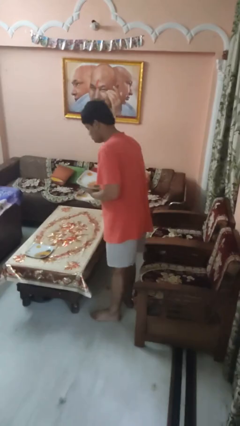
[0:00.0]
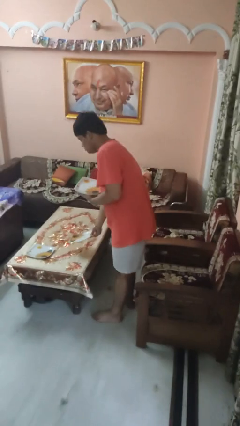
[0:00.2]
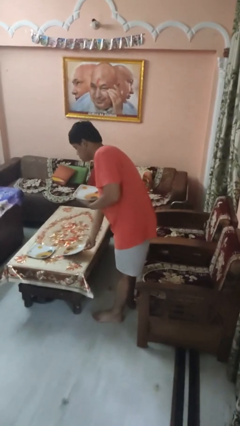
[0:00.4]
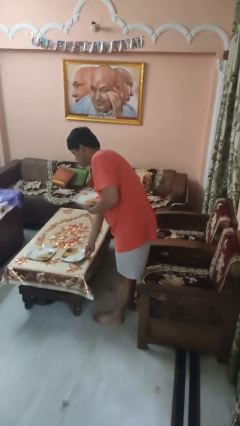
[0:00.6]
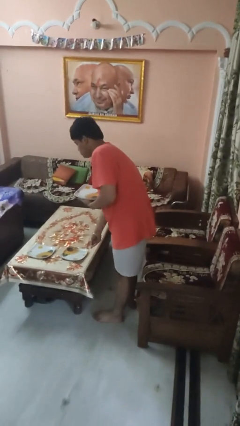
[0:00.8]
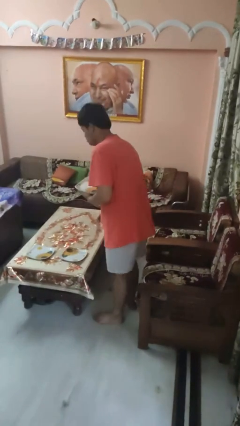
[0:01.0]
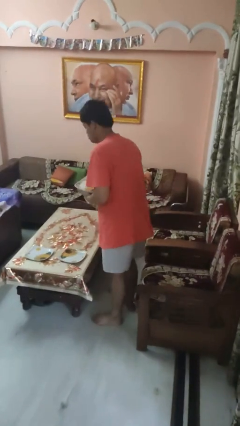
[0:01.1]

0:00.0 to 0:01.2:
person sets table

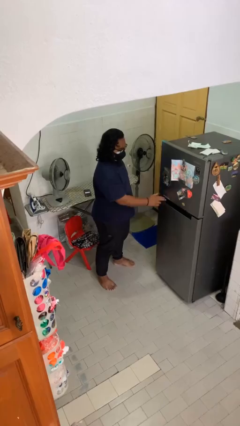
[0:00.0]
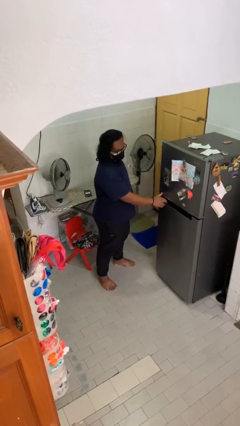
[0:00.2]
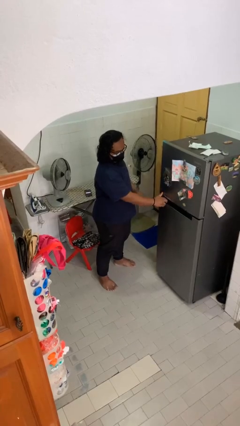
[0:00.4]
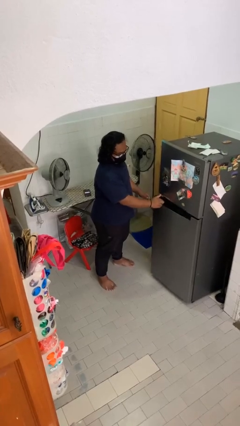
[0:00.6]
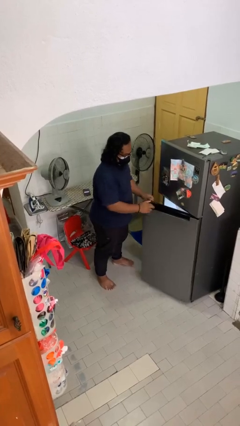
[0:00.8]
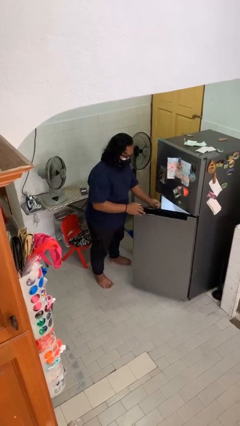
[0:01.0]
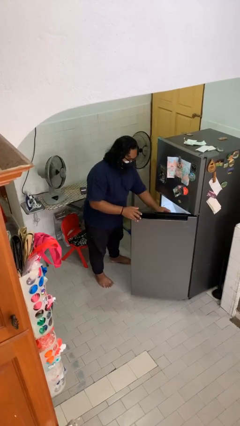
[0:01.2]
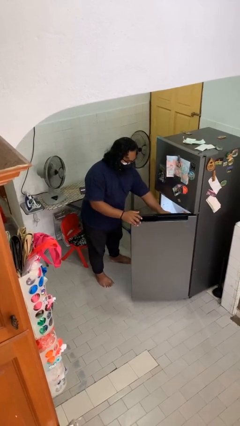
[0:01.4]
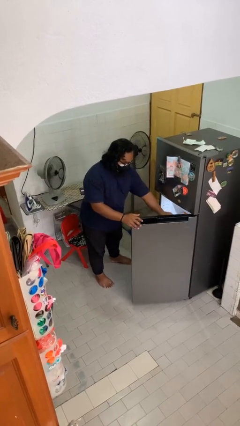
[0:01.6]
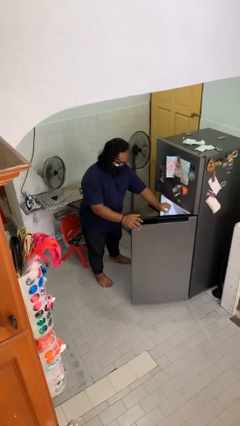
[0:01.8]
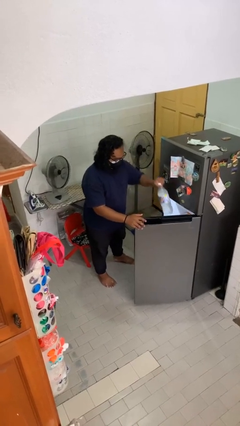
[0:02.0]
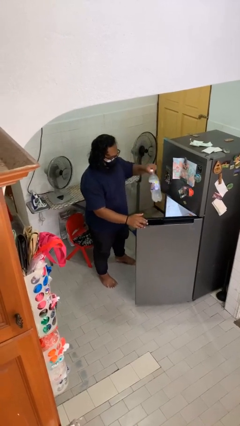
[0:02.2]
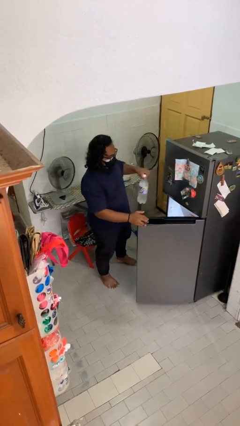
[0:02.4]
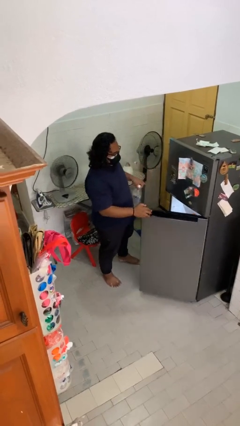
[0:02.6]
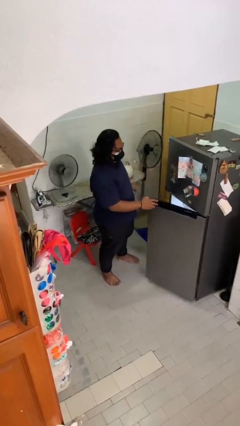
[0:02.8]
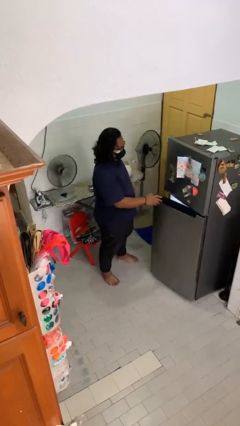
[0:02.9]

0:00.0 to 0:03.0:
person takes object from refrigerator

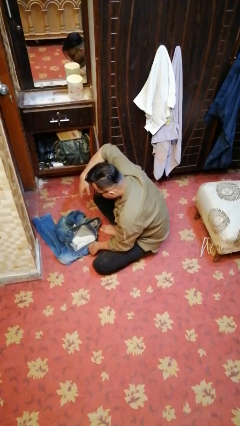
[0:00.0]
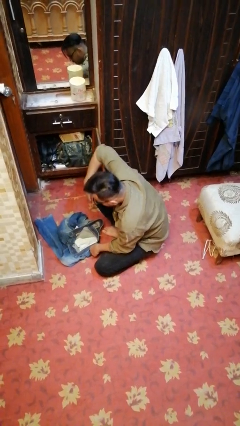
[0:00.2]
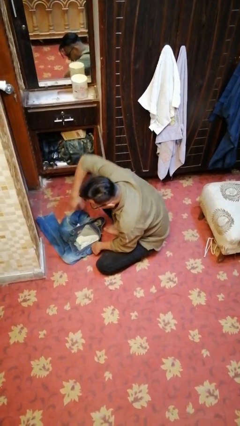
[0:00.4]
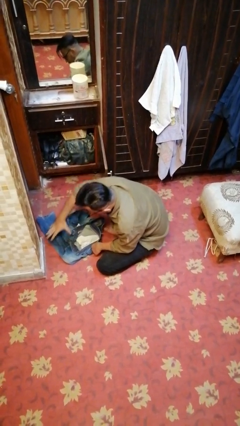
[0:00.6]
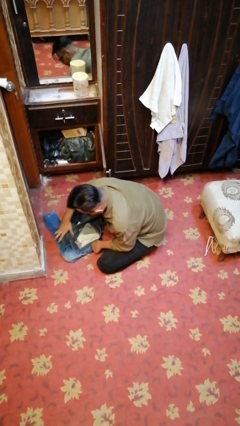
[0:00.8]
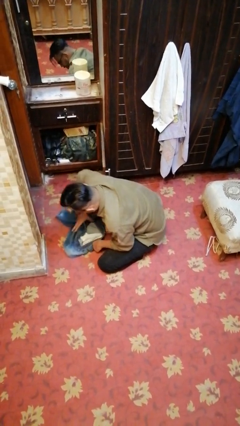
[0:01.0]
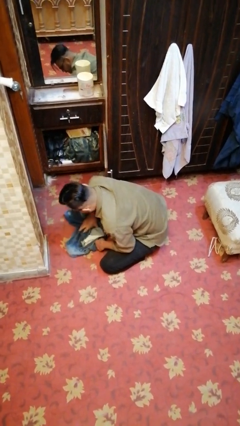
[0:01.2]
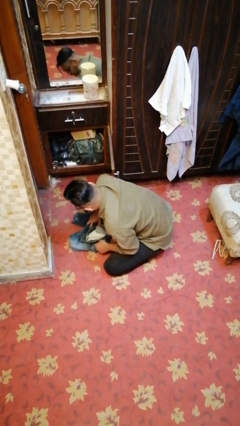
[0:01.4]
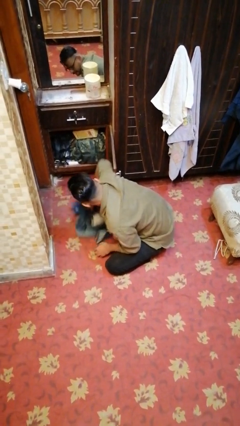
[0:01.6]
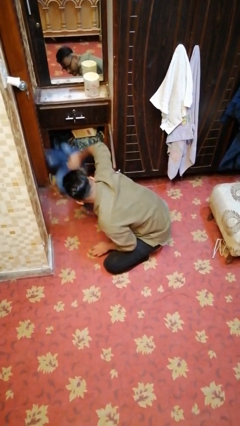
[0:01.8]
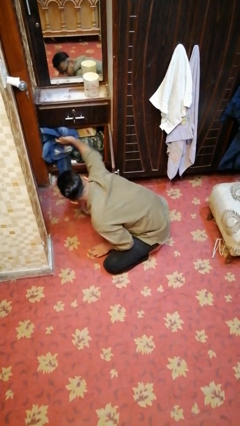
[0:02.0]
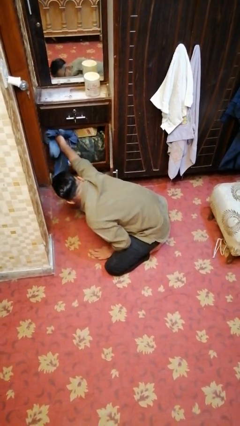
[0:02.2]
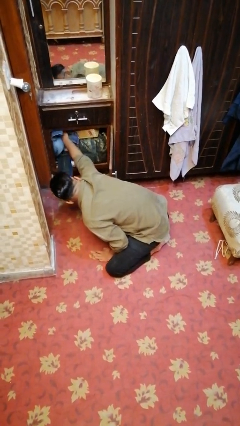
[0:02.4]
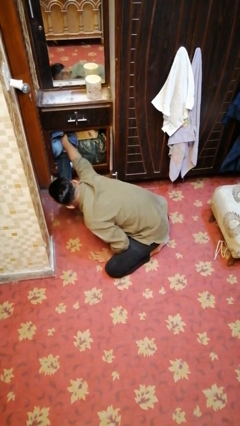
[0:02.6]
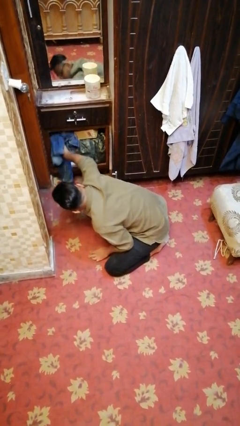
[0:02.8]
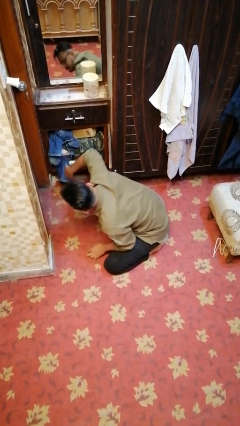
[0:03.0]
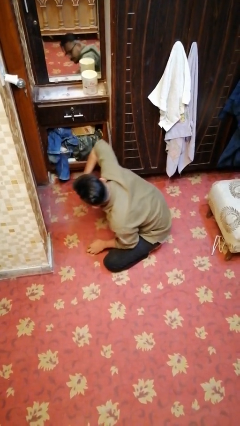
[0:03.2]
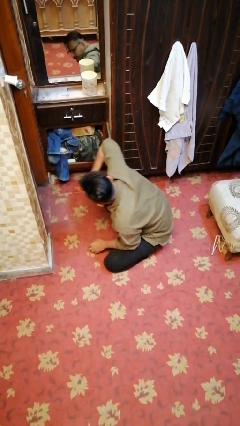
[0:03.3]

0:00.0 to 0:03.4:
person puts clothes into dresser

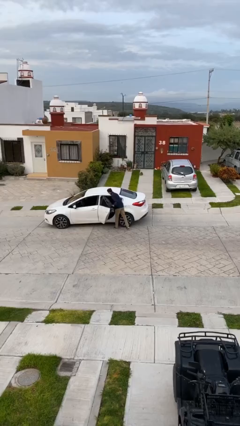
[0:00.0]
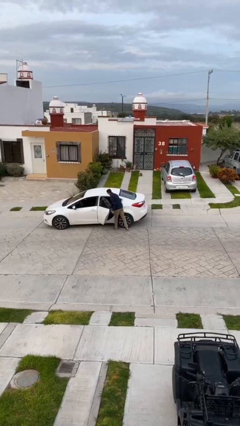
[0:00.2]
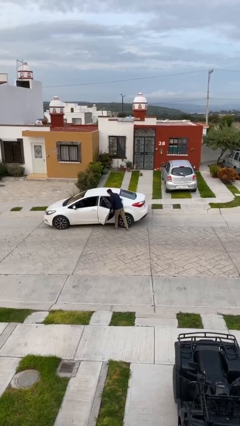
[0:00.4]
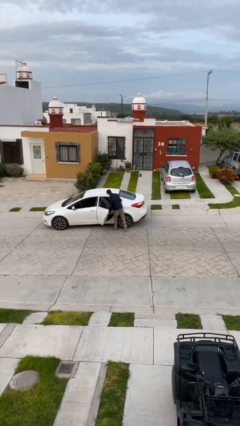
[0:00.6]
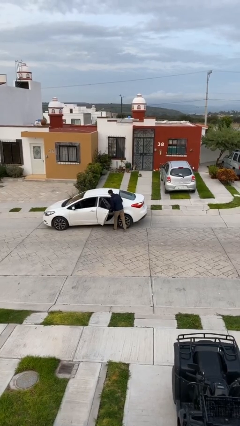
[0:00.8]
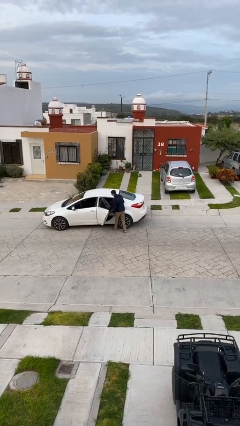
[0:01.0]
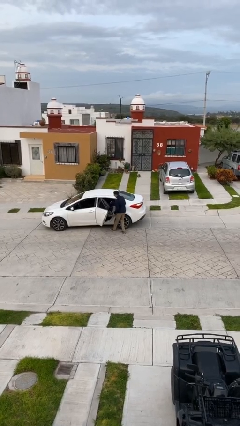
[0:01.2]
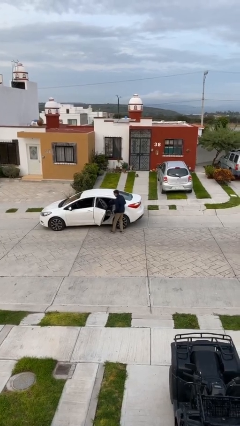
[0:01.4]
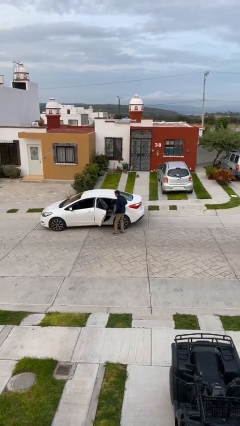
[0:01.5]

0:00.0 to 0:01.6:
person unloads car

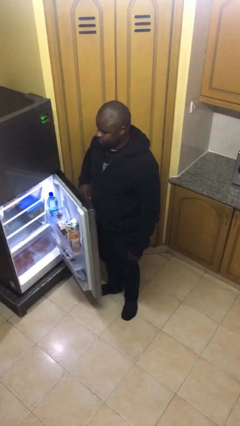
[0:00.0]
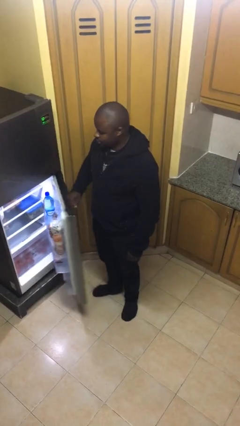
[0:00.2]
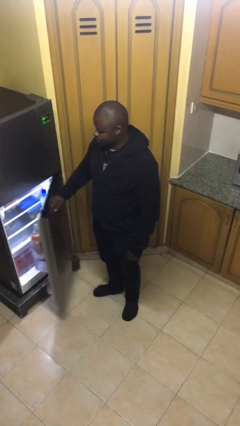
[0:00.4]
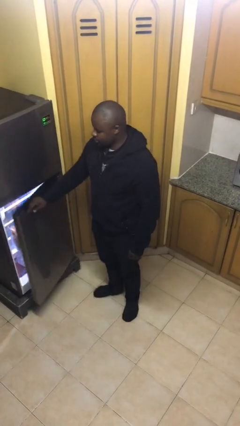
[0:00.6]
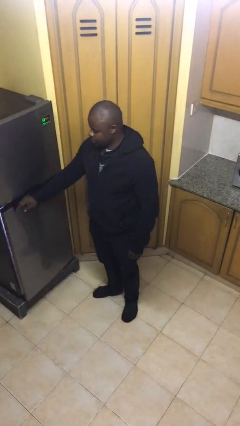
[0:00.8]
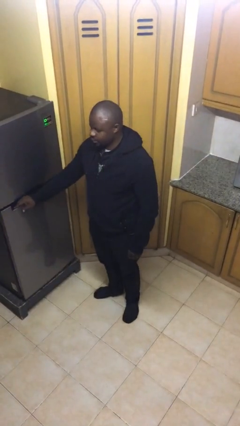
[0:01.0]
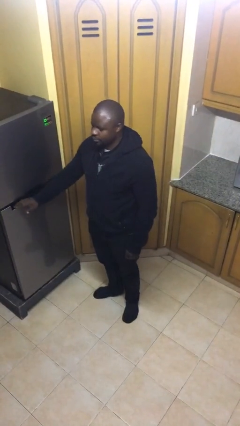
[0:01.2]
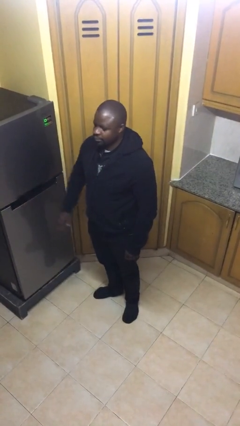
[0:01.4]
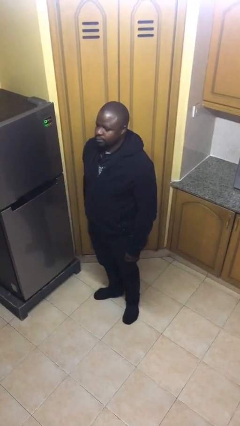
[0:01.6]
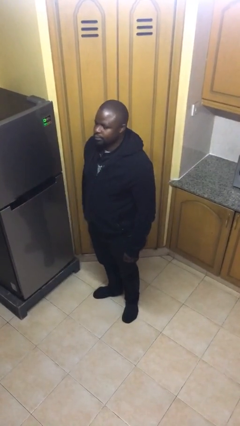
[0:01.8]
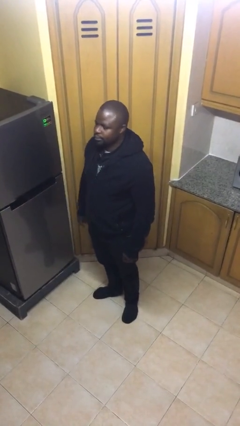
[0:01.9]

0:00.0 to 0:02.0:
person closes refrigerator

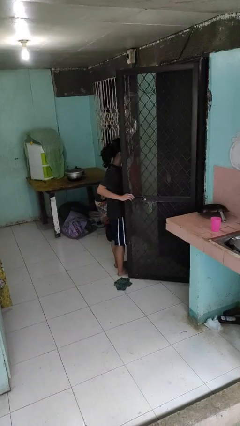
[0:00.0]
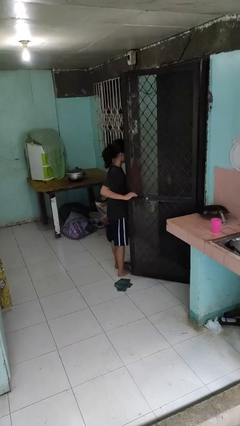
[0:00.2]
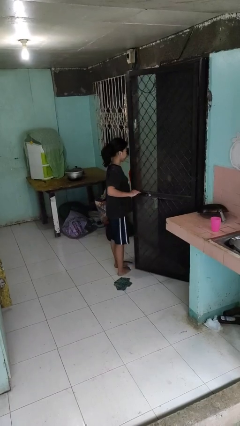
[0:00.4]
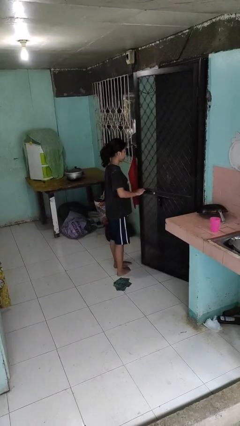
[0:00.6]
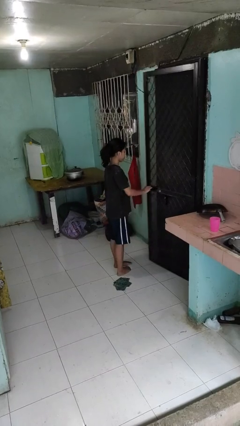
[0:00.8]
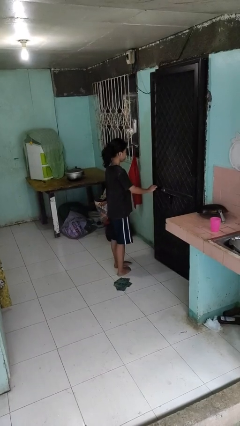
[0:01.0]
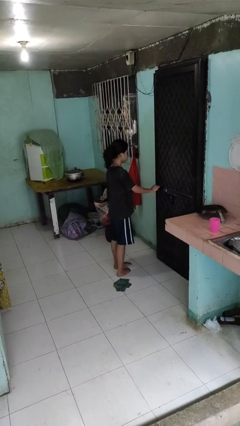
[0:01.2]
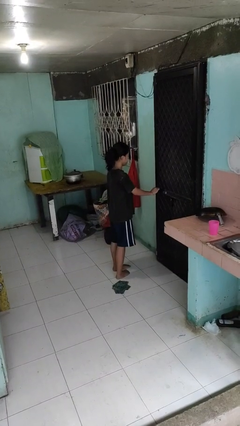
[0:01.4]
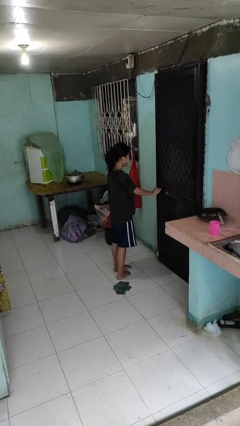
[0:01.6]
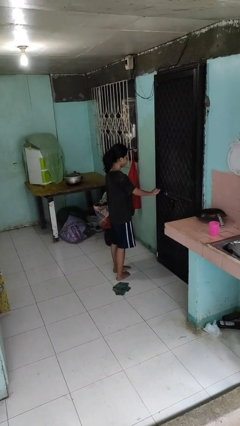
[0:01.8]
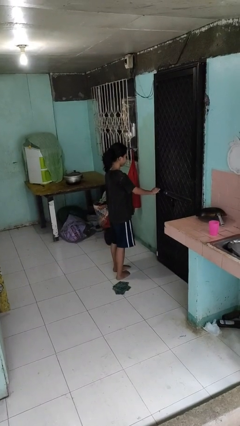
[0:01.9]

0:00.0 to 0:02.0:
person closes facility door

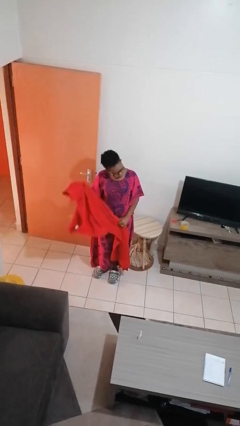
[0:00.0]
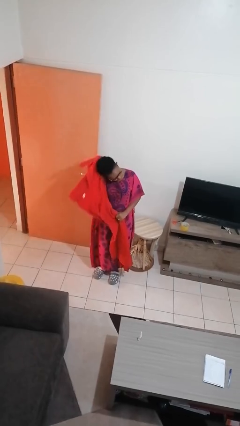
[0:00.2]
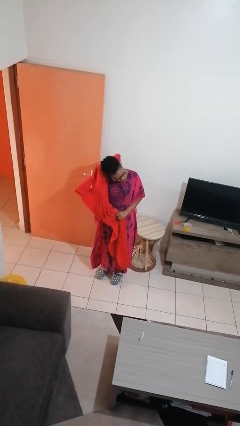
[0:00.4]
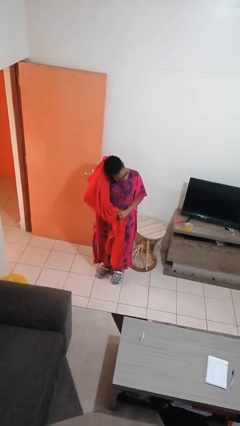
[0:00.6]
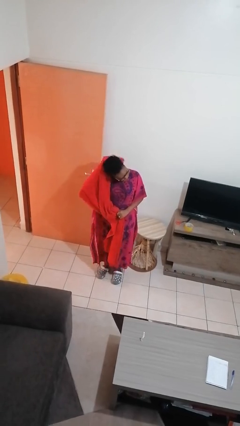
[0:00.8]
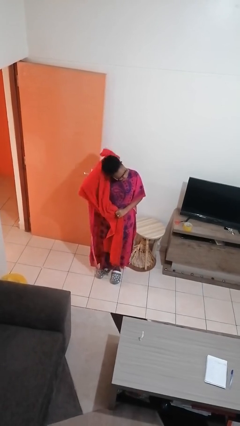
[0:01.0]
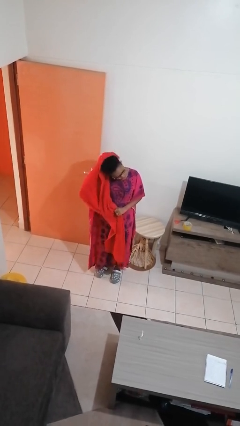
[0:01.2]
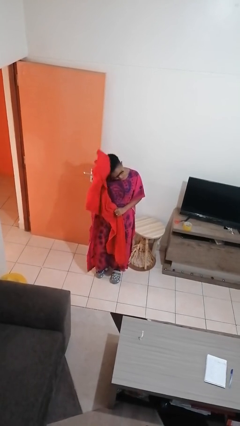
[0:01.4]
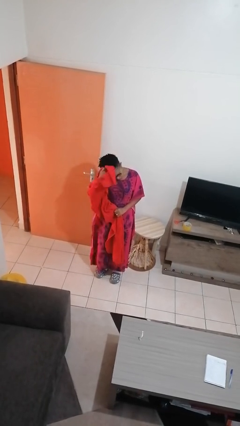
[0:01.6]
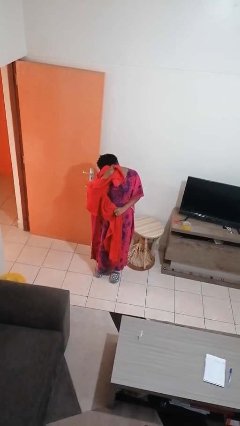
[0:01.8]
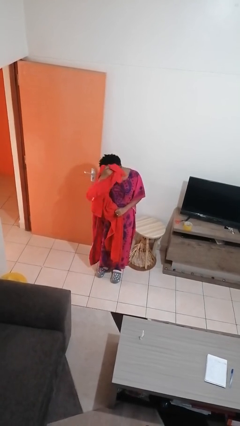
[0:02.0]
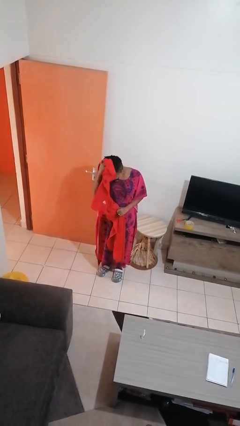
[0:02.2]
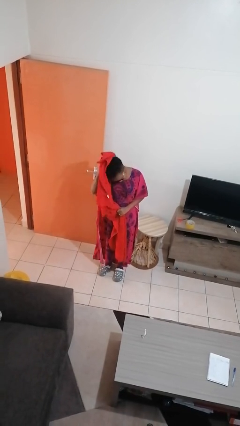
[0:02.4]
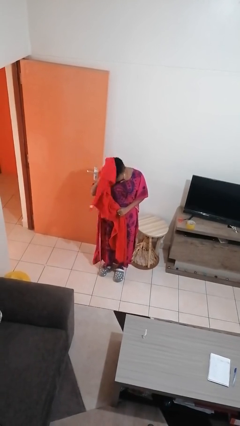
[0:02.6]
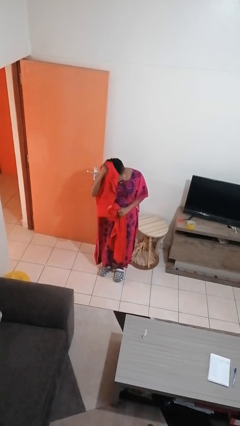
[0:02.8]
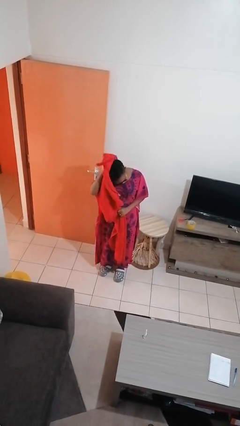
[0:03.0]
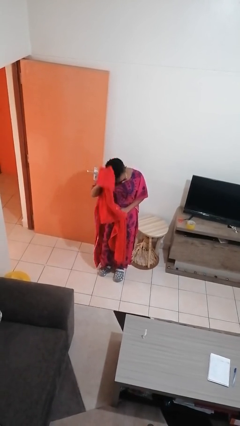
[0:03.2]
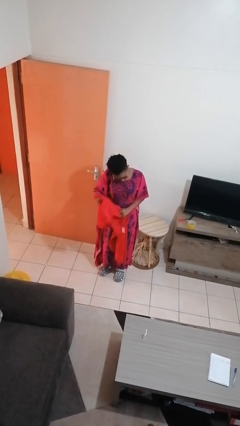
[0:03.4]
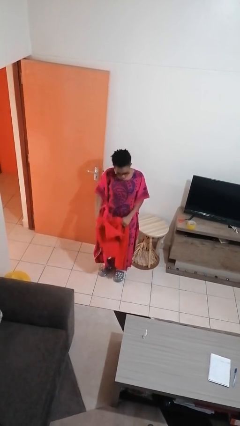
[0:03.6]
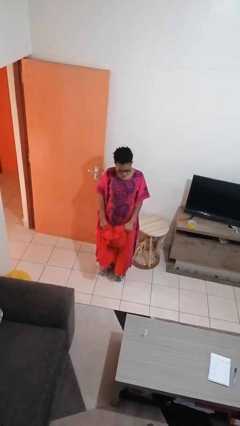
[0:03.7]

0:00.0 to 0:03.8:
person dries hair with towel
